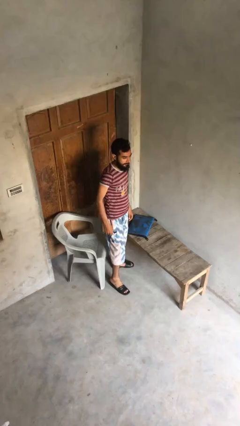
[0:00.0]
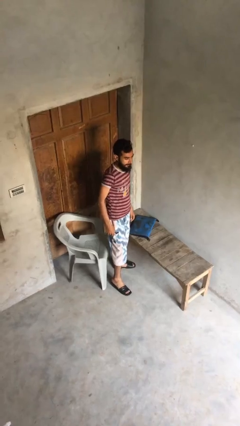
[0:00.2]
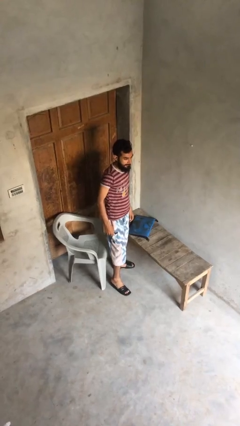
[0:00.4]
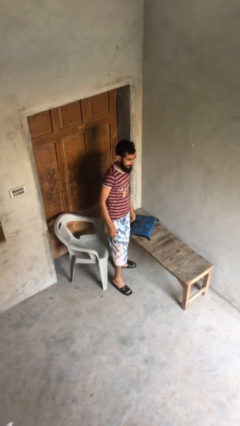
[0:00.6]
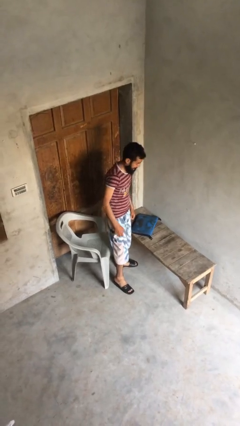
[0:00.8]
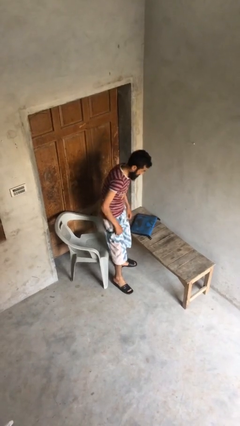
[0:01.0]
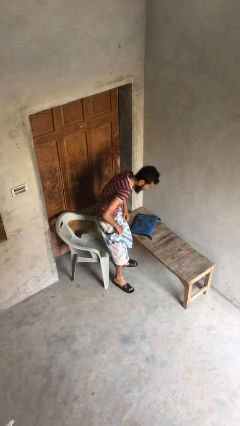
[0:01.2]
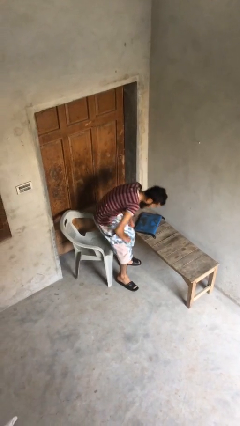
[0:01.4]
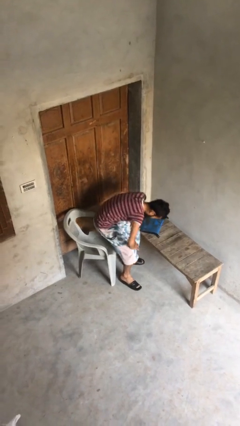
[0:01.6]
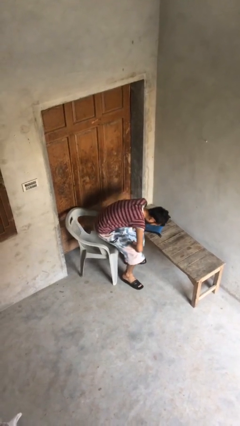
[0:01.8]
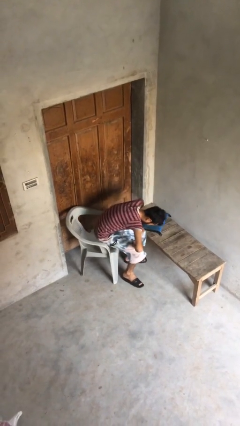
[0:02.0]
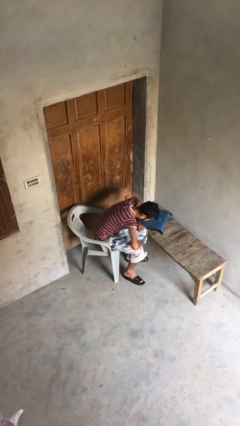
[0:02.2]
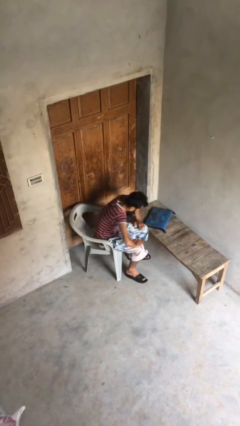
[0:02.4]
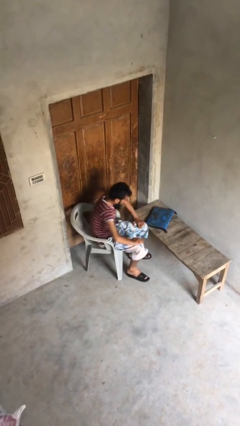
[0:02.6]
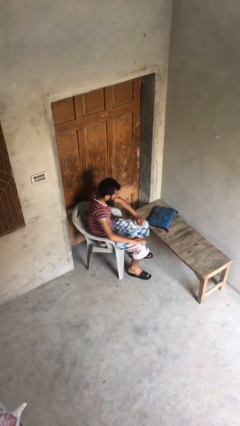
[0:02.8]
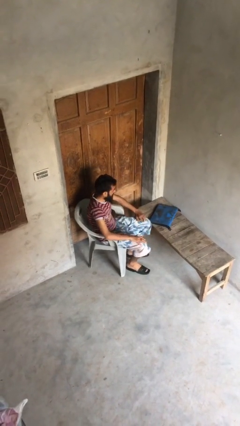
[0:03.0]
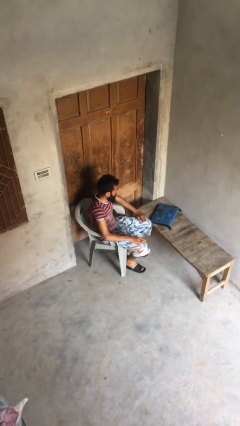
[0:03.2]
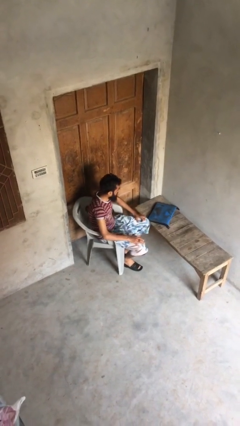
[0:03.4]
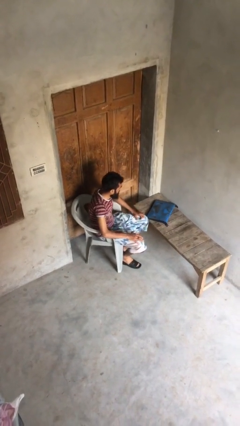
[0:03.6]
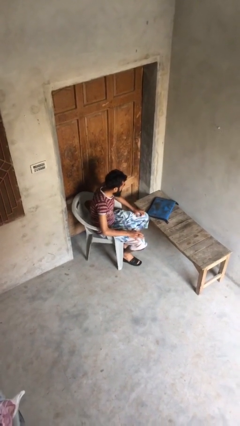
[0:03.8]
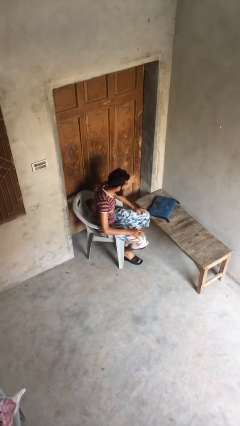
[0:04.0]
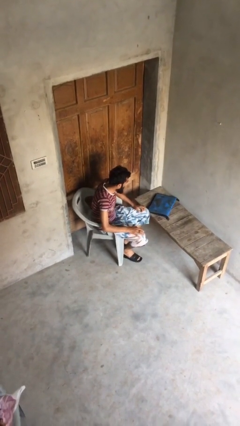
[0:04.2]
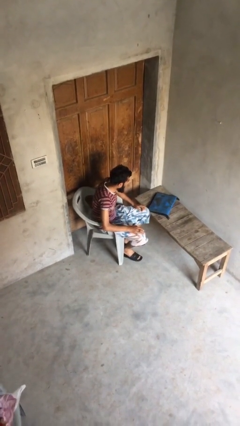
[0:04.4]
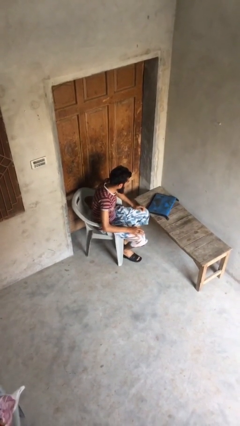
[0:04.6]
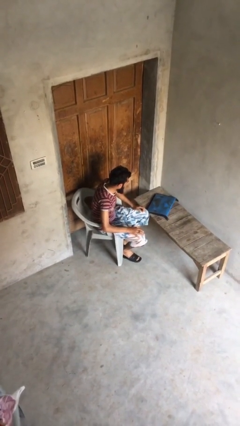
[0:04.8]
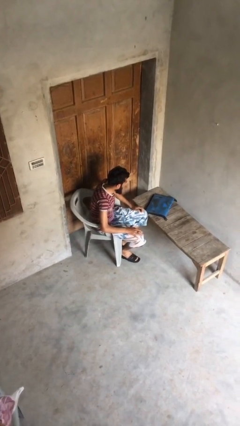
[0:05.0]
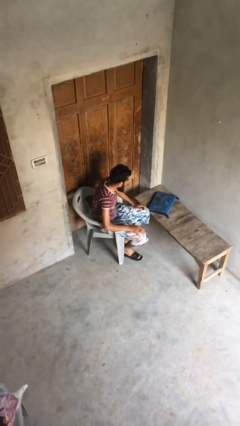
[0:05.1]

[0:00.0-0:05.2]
person sits down

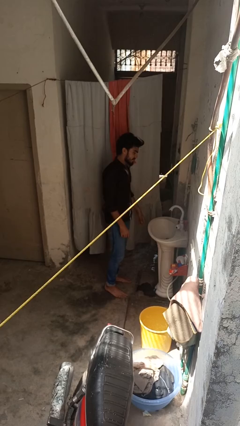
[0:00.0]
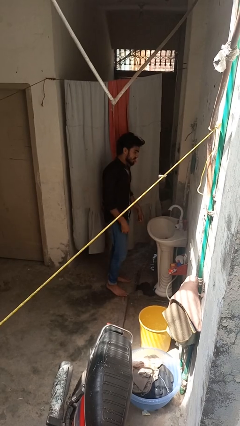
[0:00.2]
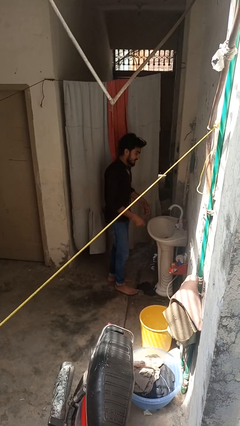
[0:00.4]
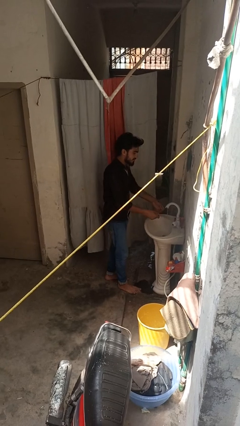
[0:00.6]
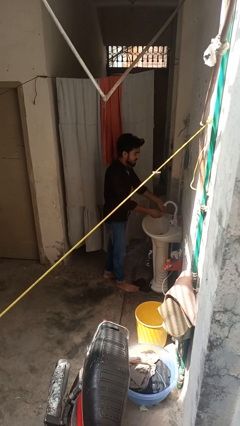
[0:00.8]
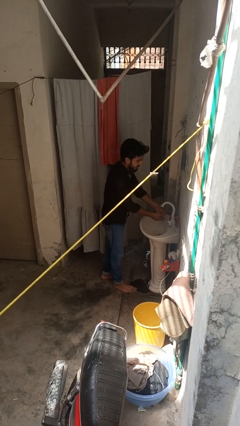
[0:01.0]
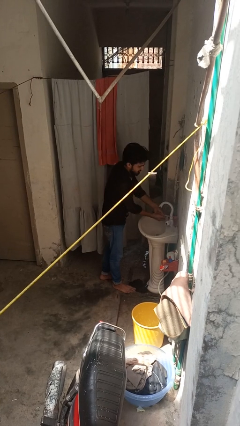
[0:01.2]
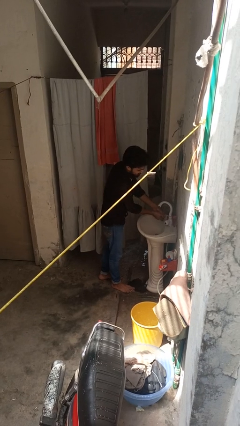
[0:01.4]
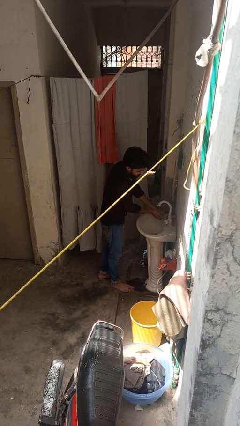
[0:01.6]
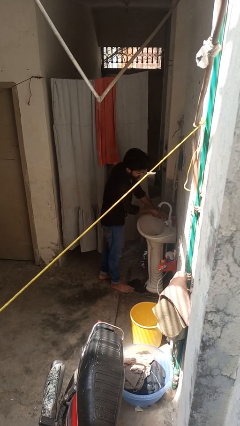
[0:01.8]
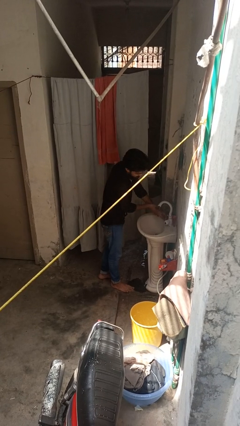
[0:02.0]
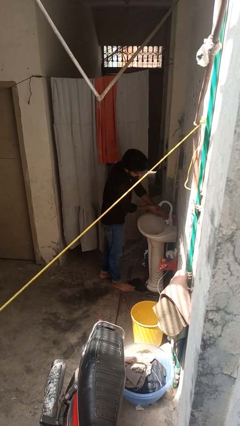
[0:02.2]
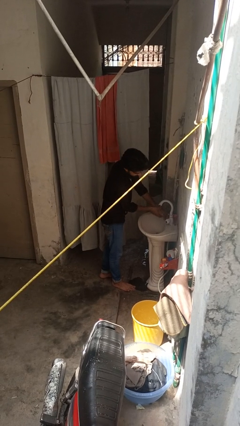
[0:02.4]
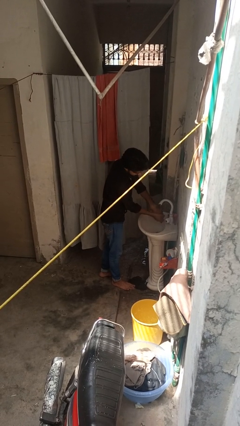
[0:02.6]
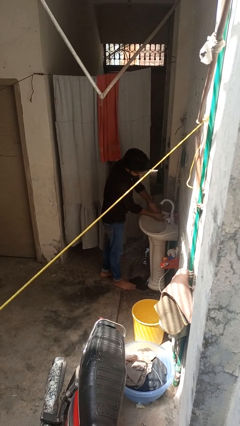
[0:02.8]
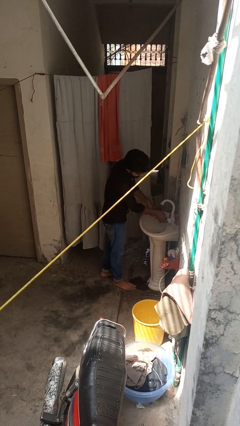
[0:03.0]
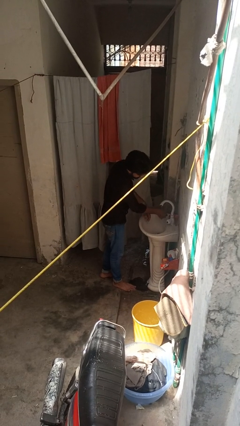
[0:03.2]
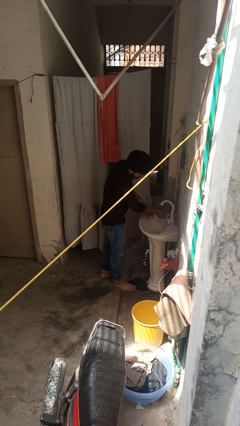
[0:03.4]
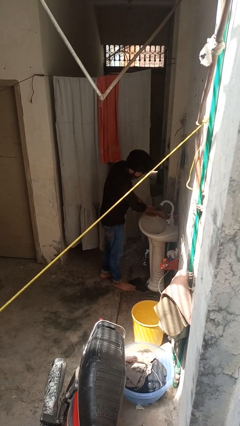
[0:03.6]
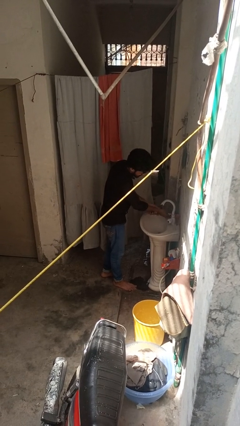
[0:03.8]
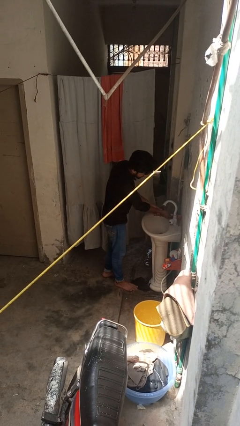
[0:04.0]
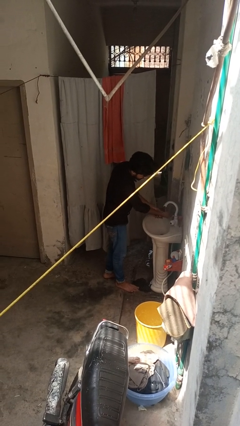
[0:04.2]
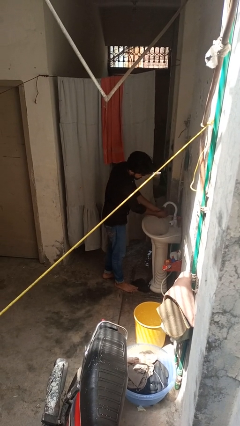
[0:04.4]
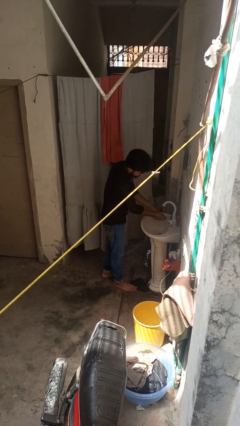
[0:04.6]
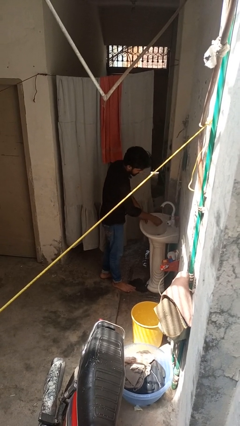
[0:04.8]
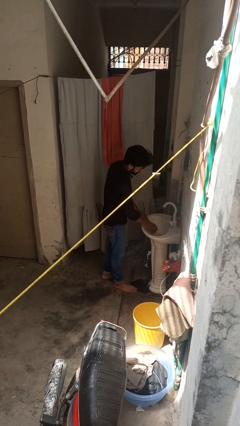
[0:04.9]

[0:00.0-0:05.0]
person washes hands

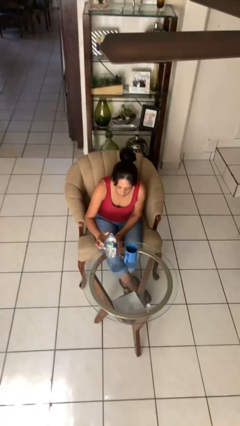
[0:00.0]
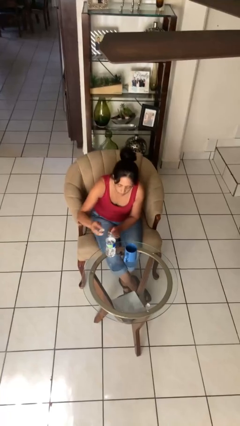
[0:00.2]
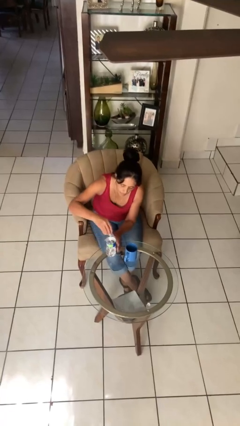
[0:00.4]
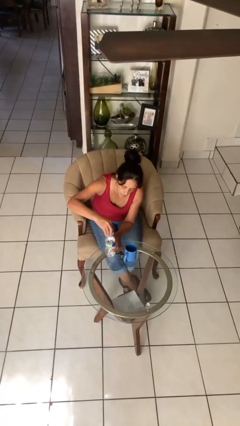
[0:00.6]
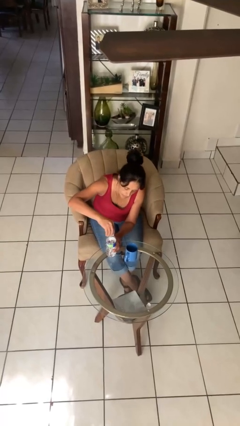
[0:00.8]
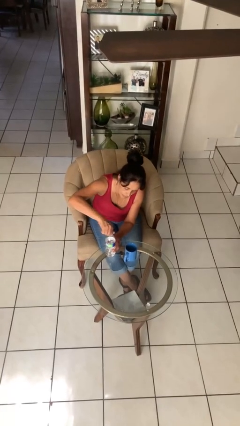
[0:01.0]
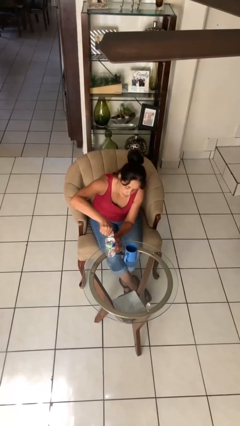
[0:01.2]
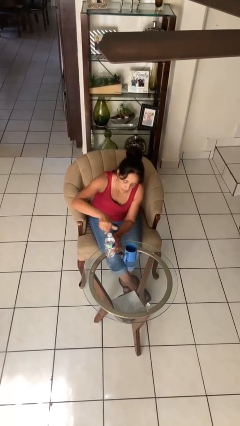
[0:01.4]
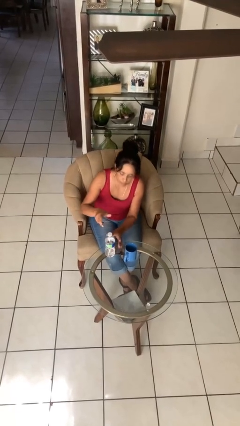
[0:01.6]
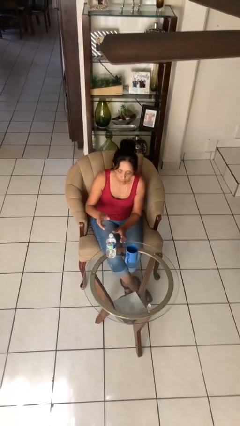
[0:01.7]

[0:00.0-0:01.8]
person screws lid to bottle

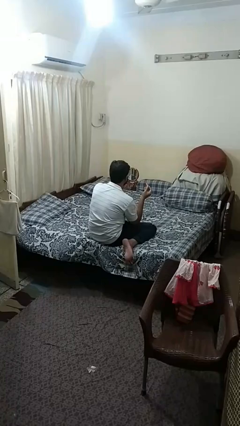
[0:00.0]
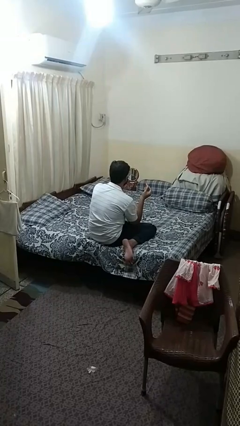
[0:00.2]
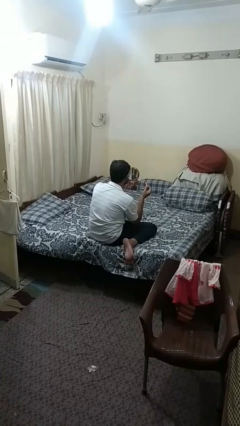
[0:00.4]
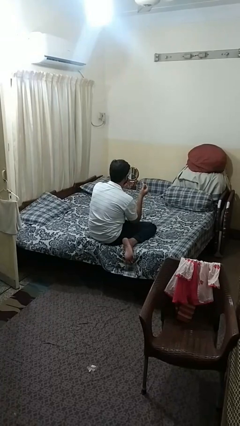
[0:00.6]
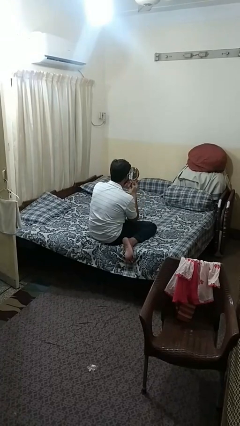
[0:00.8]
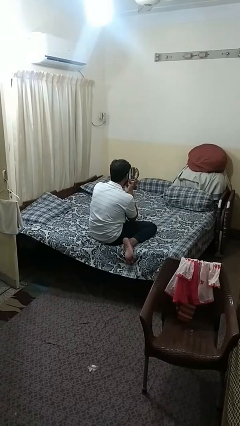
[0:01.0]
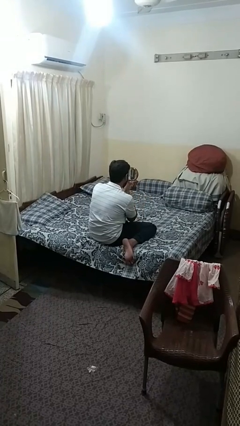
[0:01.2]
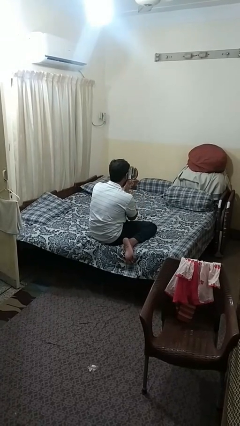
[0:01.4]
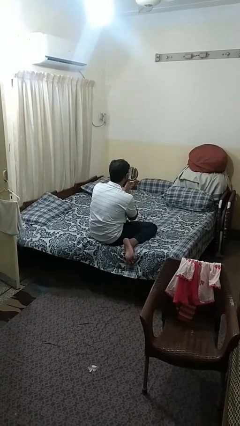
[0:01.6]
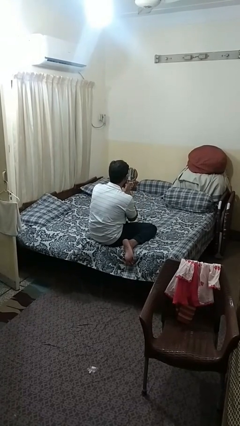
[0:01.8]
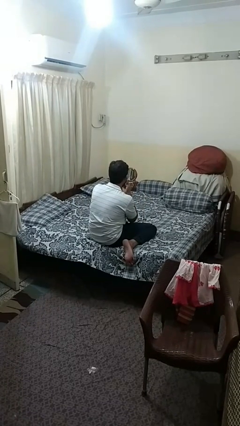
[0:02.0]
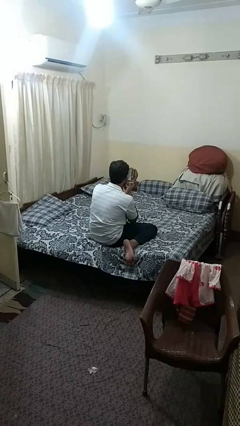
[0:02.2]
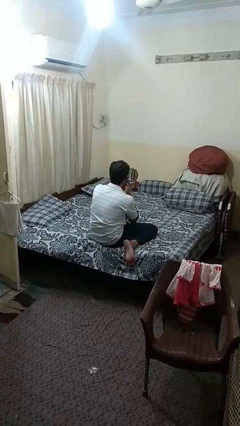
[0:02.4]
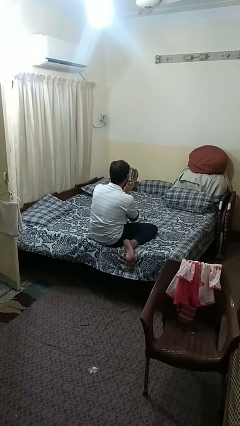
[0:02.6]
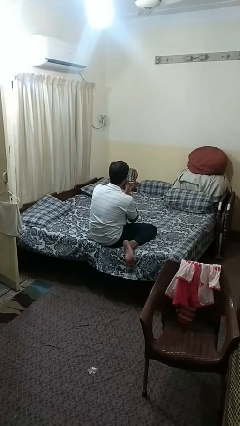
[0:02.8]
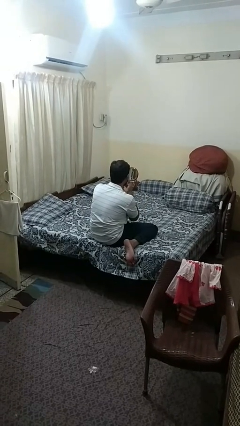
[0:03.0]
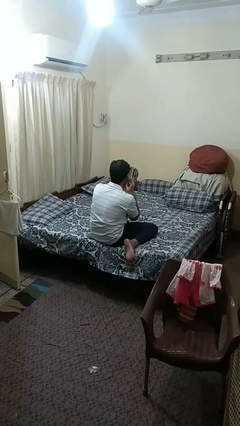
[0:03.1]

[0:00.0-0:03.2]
person applies lip makeup

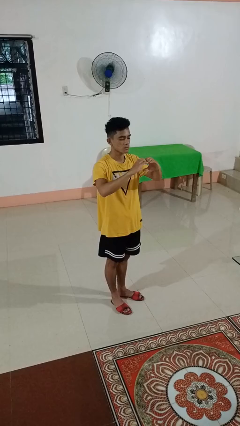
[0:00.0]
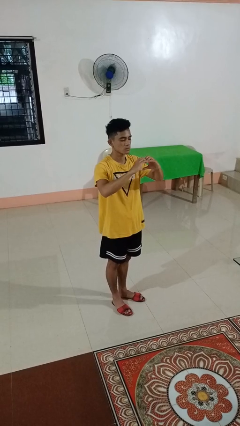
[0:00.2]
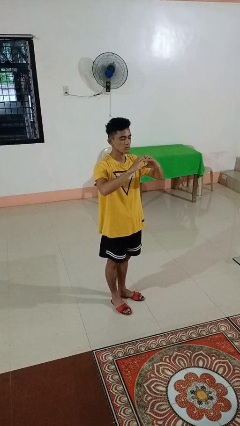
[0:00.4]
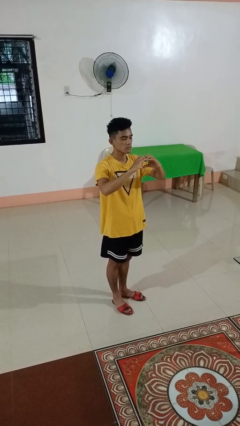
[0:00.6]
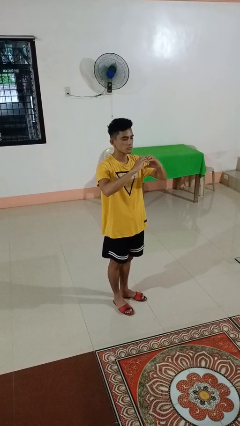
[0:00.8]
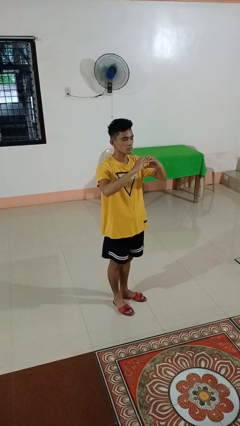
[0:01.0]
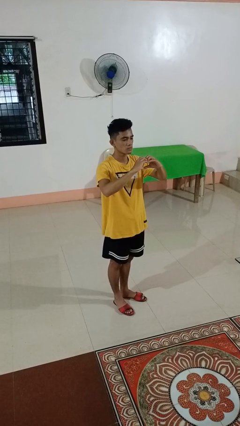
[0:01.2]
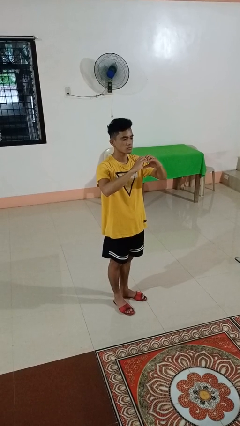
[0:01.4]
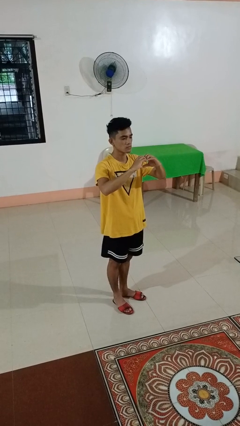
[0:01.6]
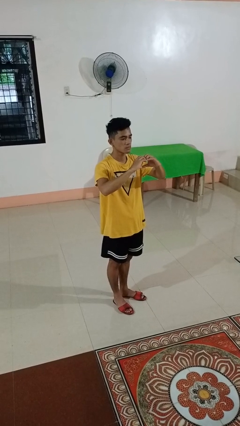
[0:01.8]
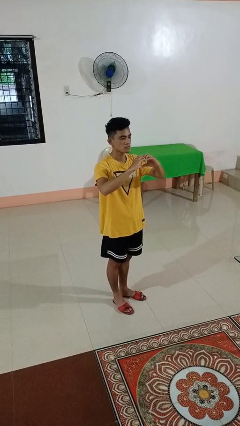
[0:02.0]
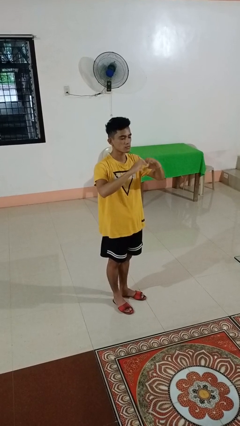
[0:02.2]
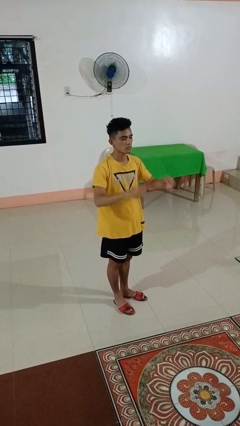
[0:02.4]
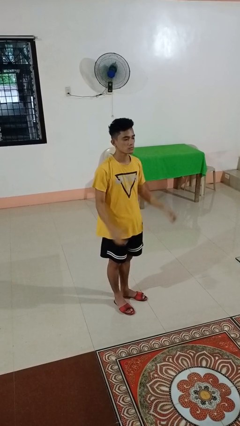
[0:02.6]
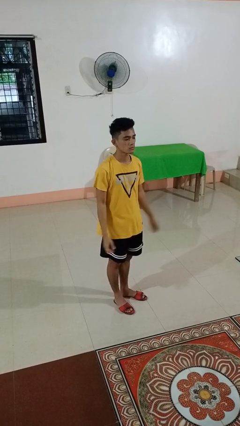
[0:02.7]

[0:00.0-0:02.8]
person gestures heart
